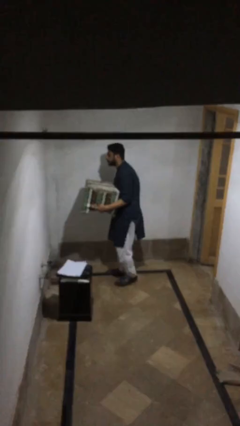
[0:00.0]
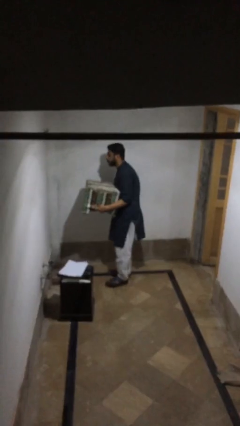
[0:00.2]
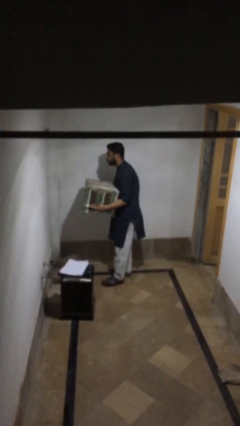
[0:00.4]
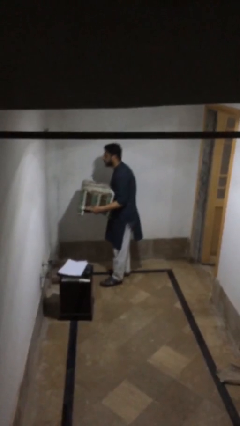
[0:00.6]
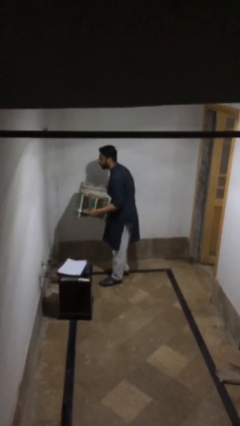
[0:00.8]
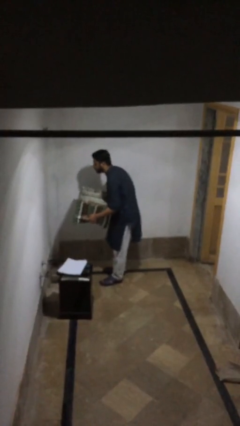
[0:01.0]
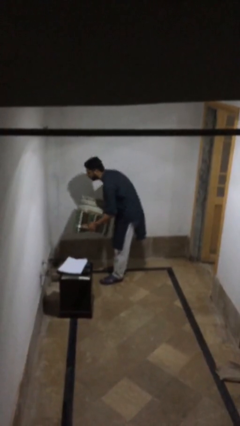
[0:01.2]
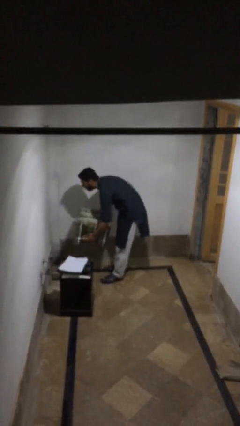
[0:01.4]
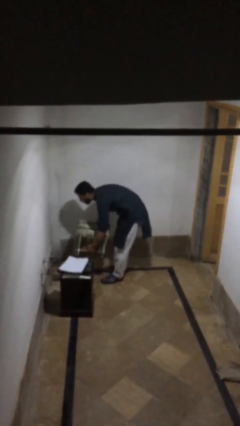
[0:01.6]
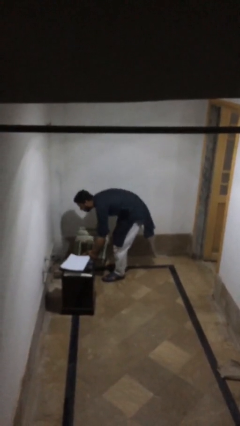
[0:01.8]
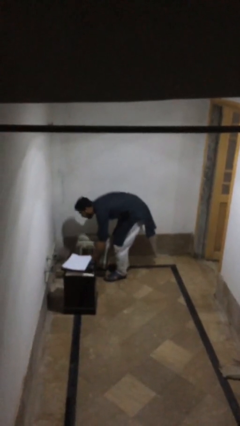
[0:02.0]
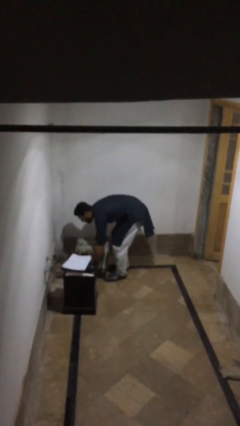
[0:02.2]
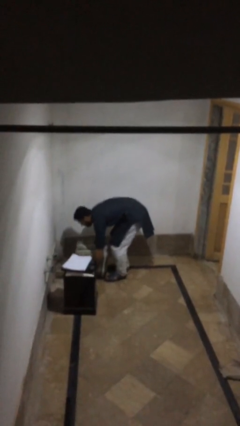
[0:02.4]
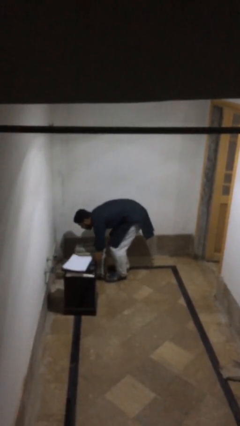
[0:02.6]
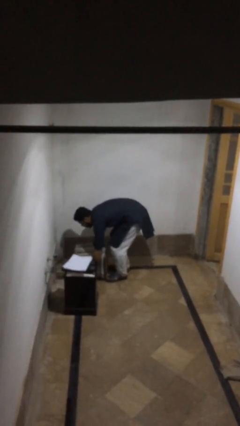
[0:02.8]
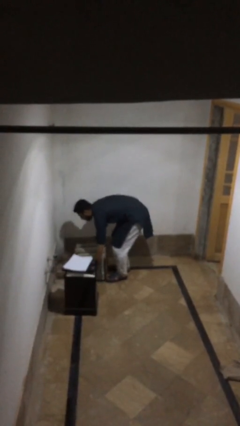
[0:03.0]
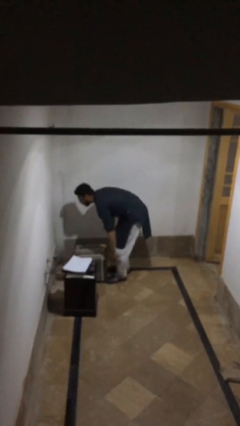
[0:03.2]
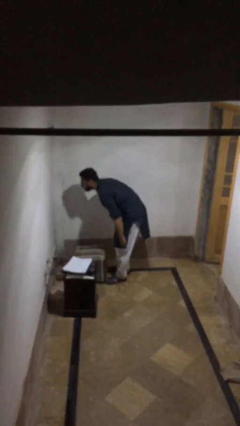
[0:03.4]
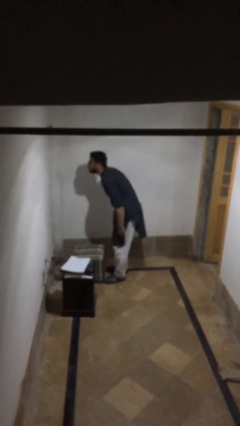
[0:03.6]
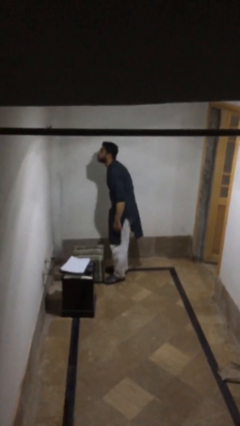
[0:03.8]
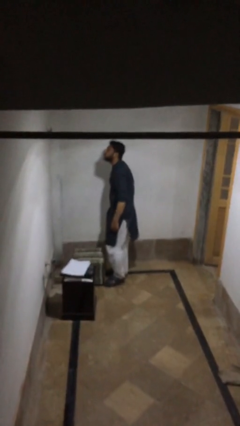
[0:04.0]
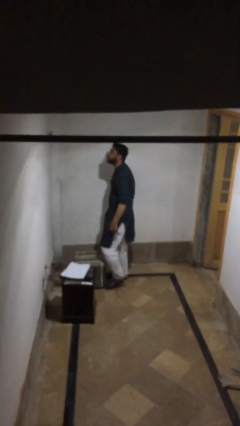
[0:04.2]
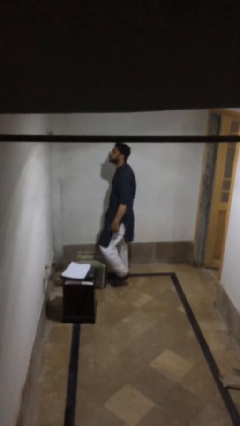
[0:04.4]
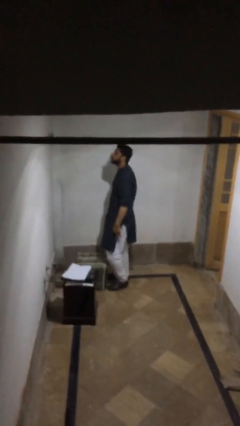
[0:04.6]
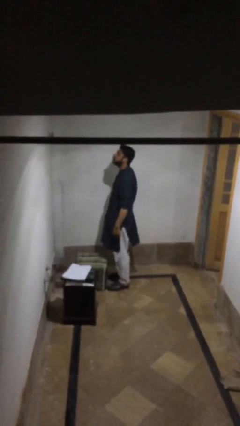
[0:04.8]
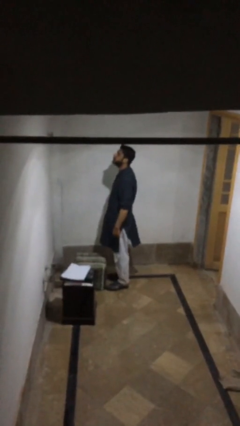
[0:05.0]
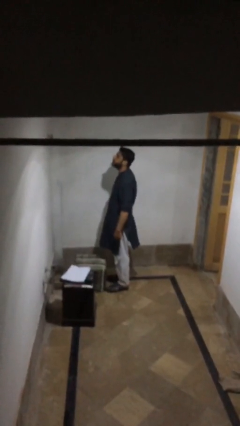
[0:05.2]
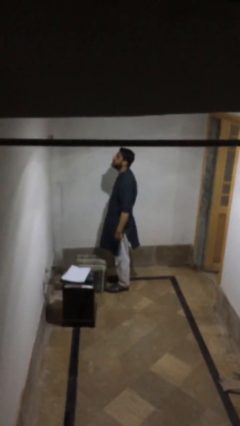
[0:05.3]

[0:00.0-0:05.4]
person puts down object on floor

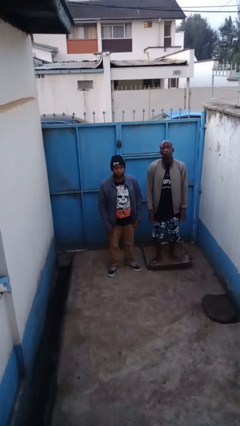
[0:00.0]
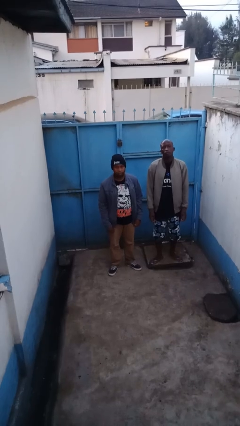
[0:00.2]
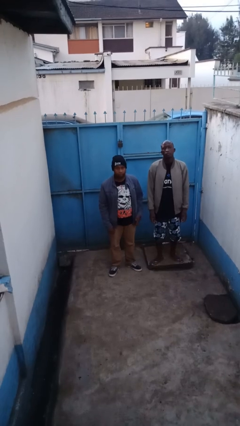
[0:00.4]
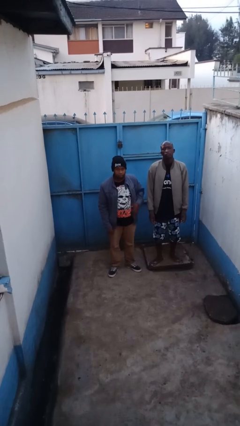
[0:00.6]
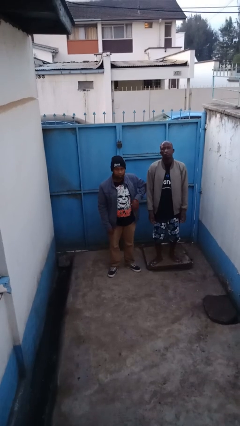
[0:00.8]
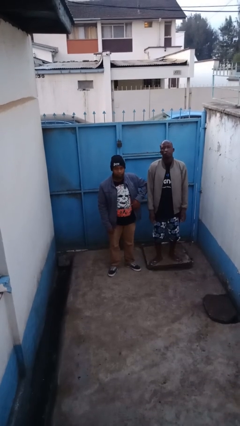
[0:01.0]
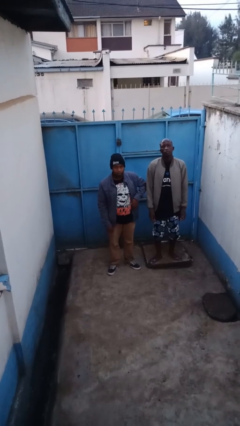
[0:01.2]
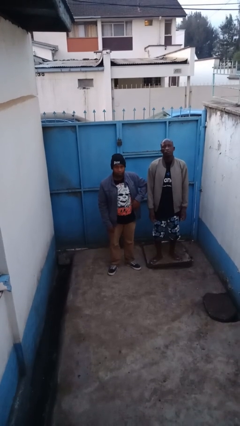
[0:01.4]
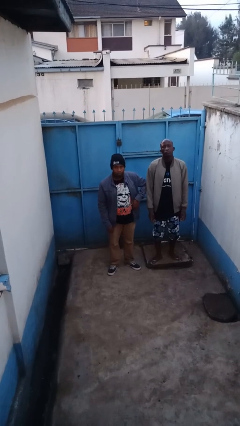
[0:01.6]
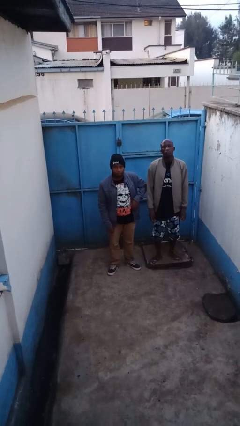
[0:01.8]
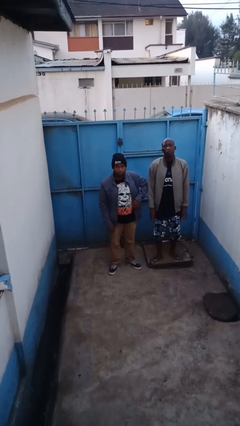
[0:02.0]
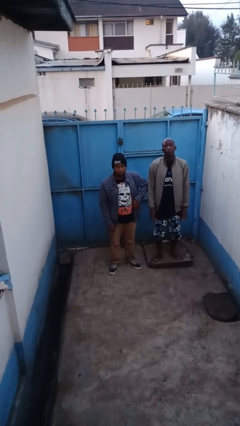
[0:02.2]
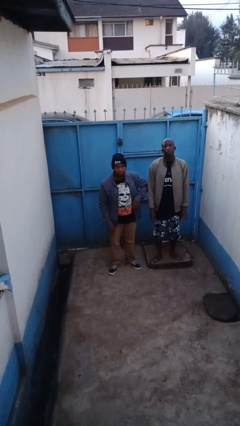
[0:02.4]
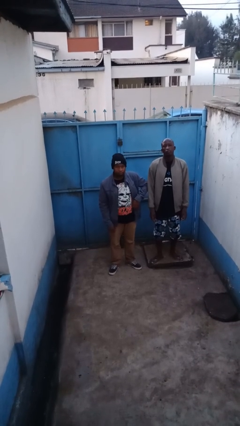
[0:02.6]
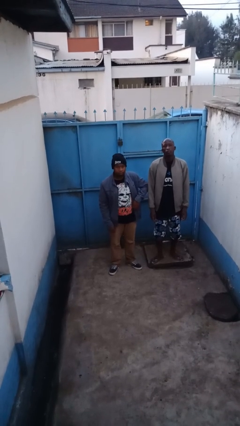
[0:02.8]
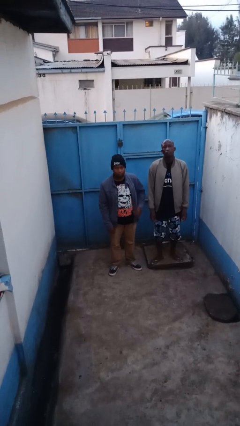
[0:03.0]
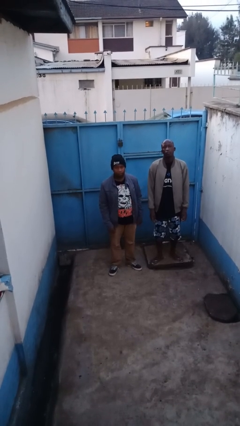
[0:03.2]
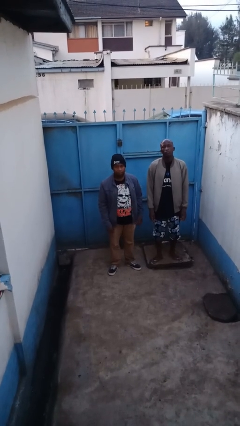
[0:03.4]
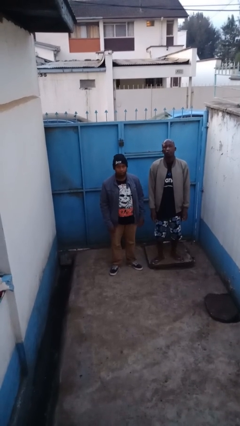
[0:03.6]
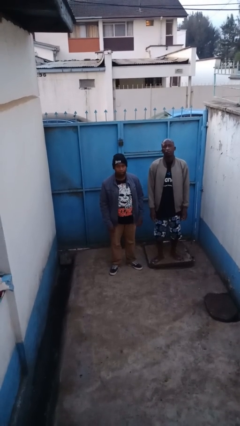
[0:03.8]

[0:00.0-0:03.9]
person nudges person with elbow

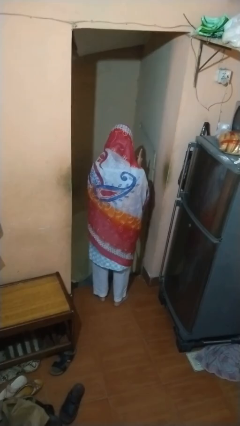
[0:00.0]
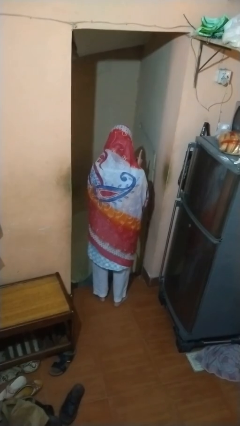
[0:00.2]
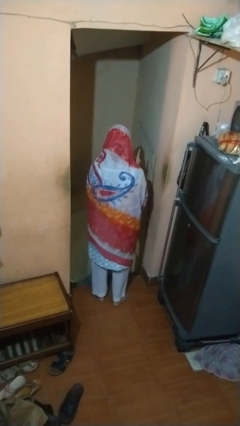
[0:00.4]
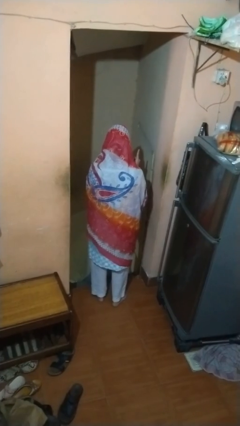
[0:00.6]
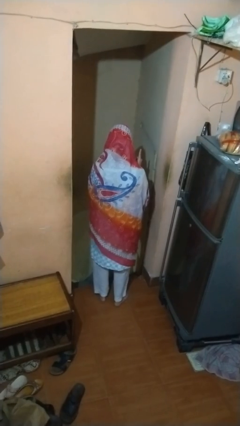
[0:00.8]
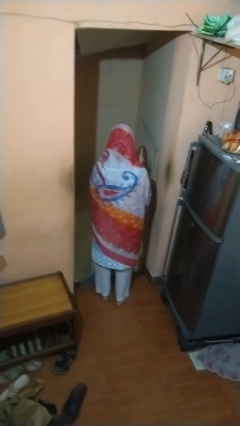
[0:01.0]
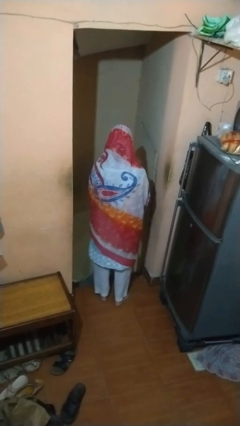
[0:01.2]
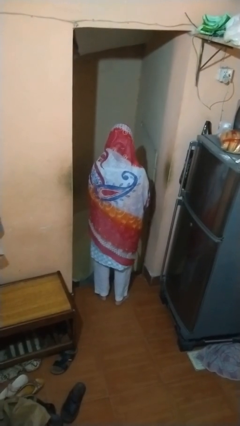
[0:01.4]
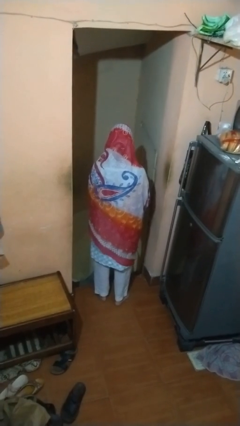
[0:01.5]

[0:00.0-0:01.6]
person gestures number one

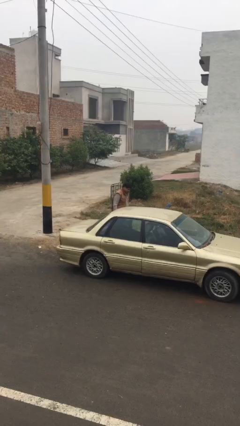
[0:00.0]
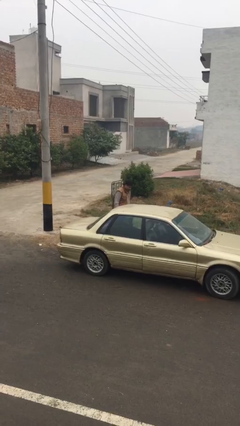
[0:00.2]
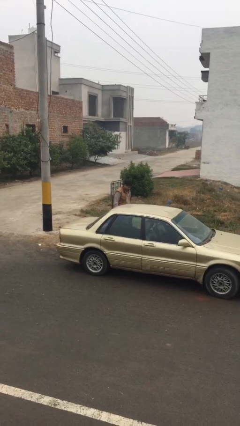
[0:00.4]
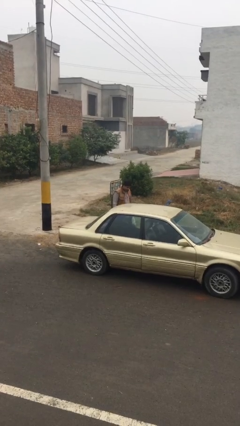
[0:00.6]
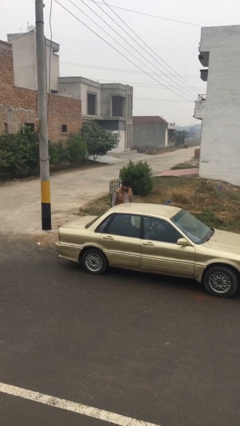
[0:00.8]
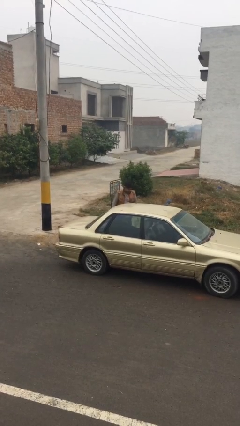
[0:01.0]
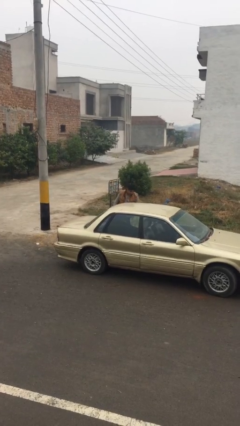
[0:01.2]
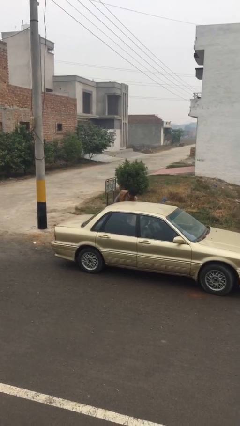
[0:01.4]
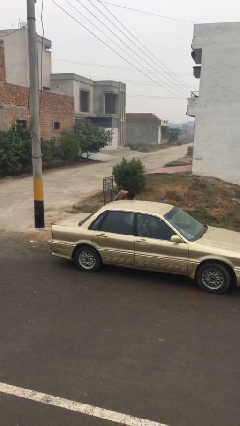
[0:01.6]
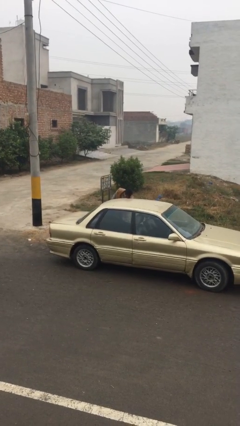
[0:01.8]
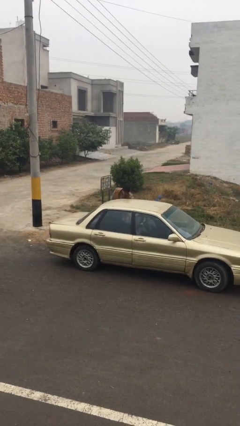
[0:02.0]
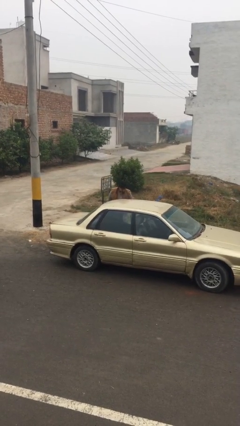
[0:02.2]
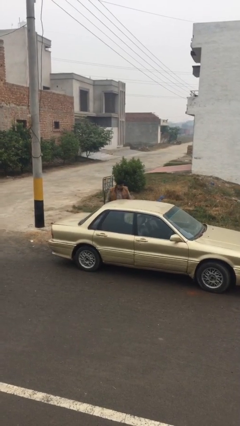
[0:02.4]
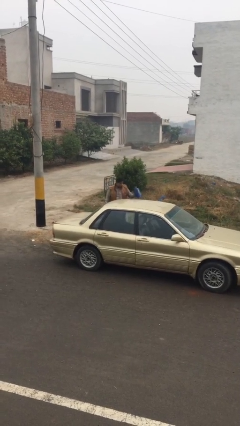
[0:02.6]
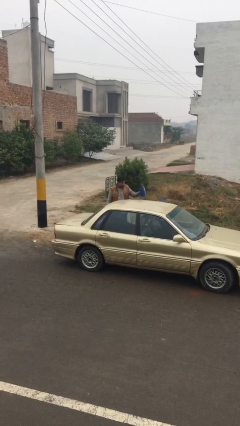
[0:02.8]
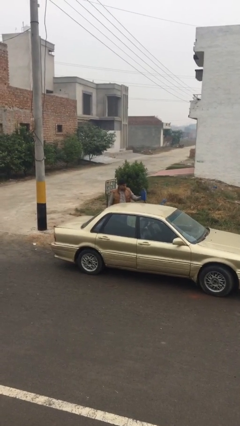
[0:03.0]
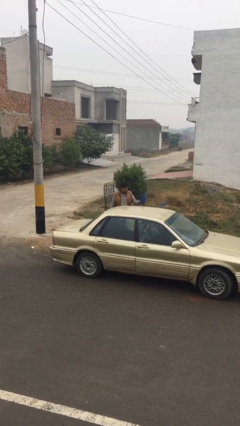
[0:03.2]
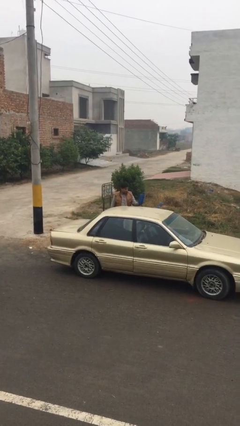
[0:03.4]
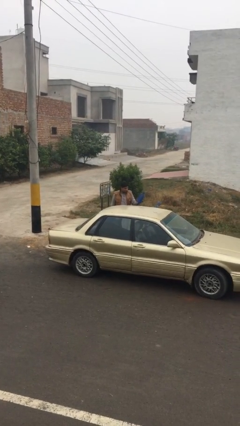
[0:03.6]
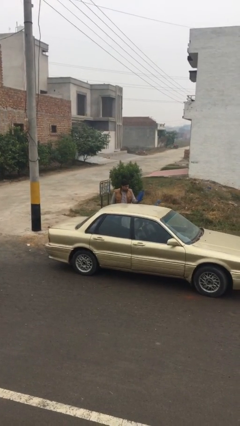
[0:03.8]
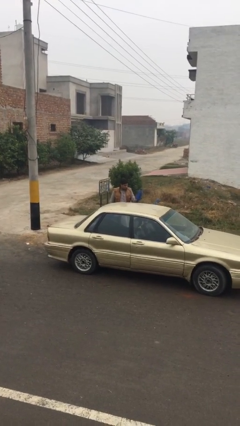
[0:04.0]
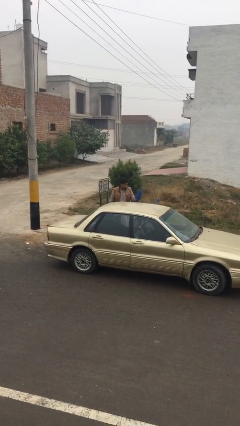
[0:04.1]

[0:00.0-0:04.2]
person unloads car

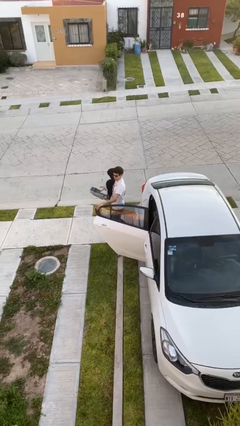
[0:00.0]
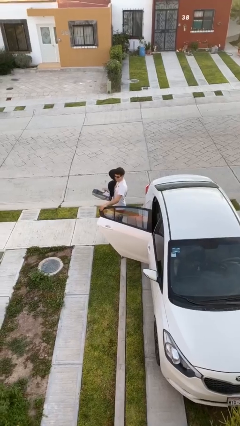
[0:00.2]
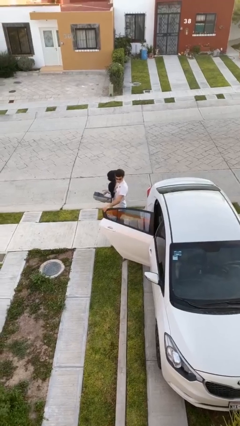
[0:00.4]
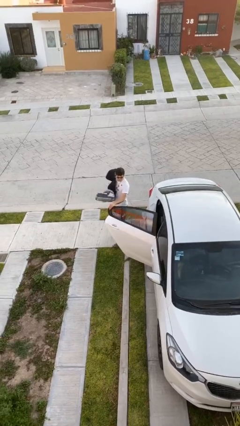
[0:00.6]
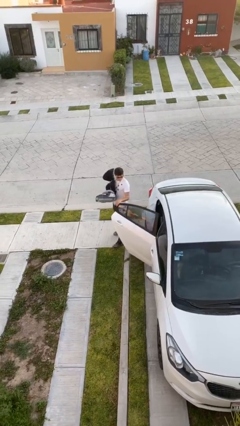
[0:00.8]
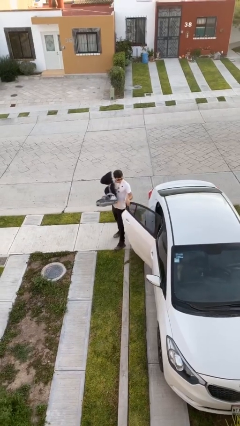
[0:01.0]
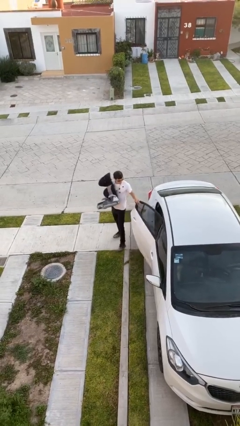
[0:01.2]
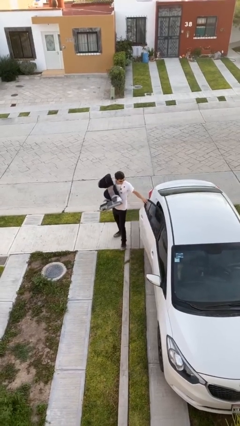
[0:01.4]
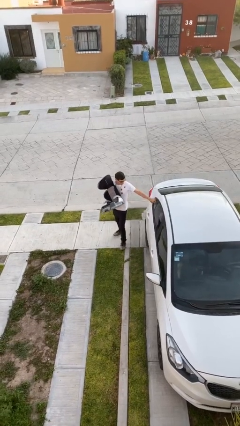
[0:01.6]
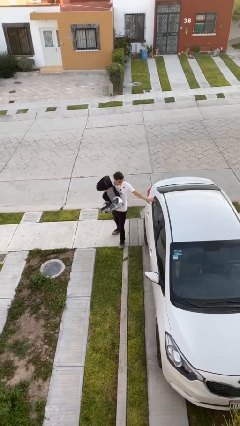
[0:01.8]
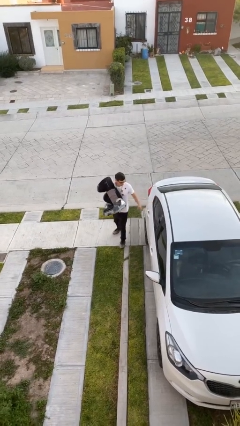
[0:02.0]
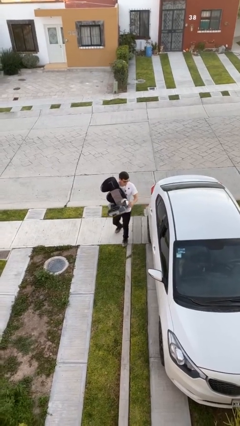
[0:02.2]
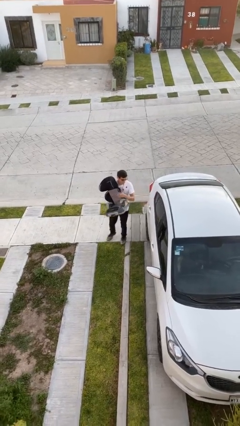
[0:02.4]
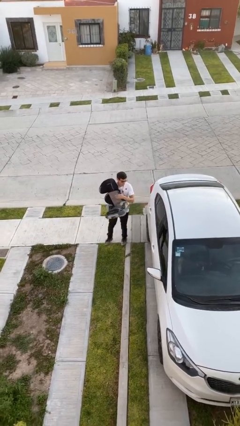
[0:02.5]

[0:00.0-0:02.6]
person closes car door
